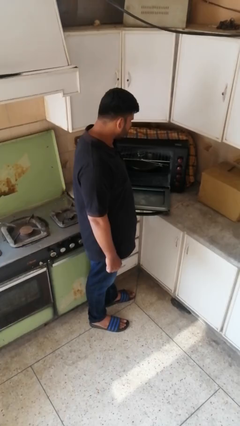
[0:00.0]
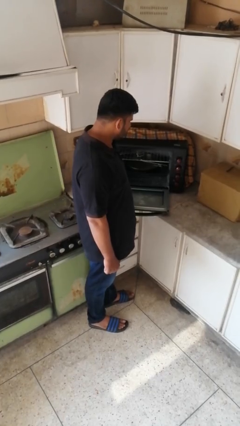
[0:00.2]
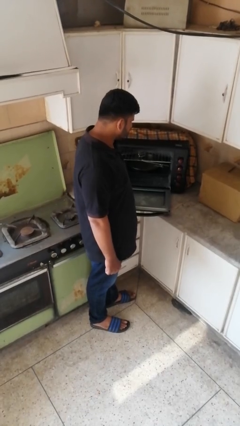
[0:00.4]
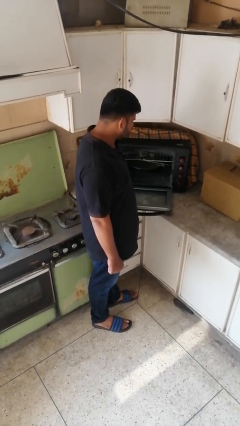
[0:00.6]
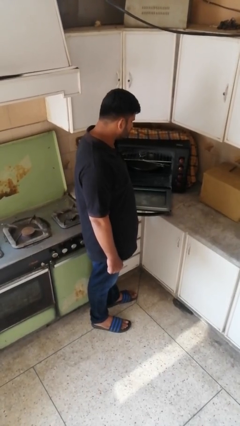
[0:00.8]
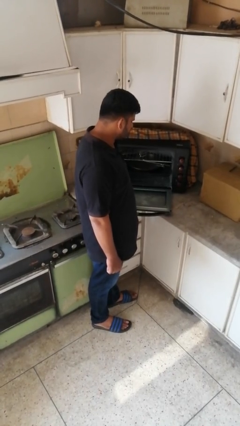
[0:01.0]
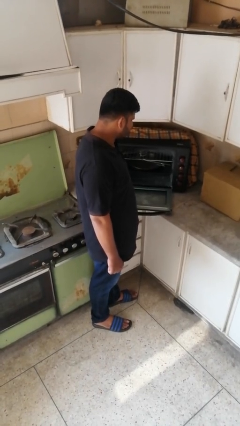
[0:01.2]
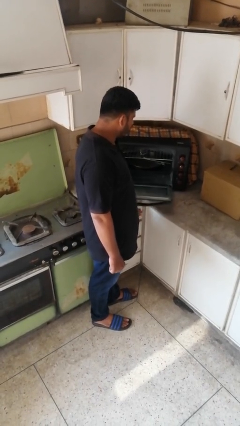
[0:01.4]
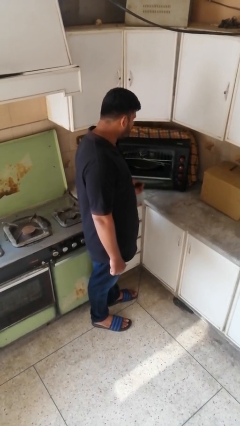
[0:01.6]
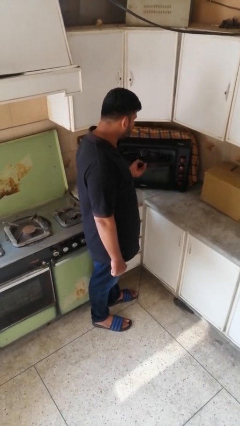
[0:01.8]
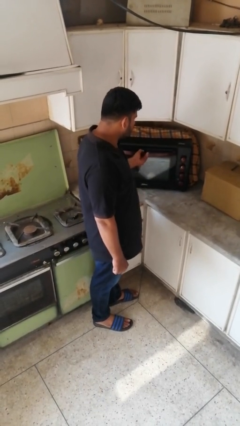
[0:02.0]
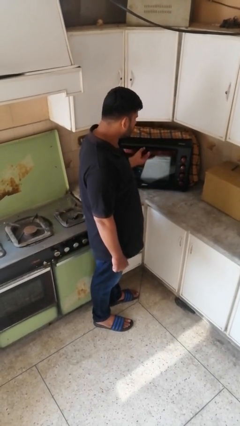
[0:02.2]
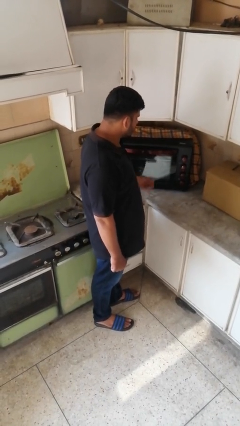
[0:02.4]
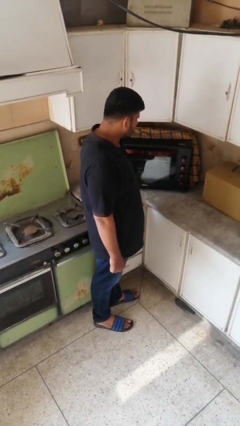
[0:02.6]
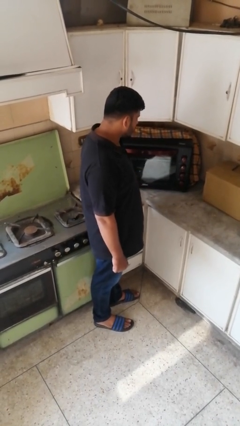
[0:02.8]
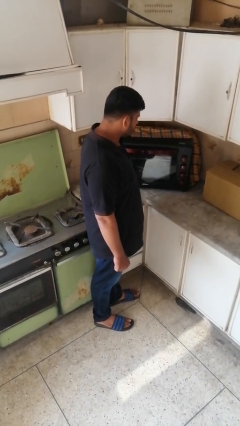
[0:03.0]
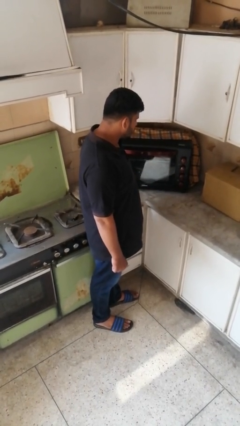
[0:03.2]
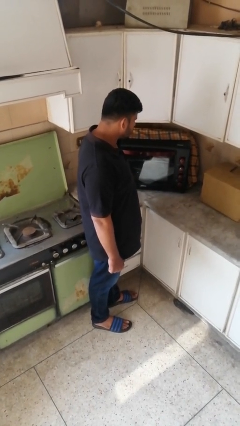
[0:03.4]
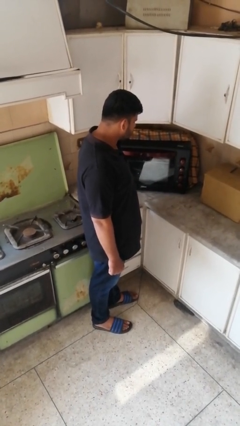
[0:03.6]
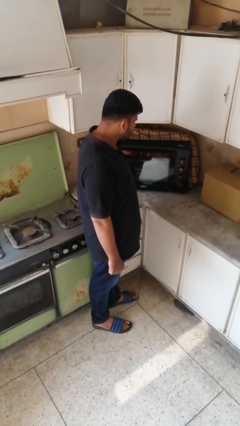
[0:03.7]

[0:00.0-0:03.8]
person closes oven door

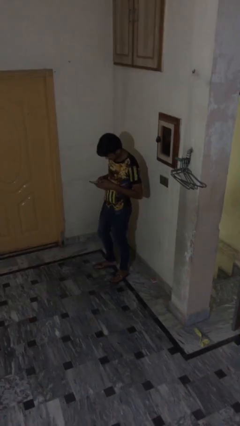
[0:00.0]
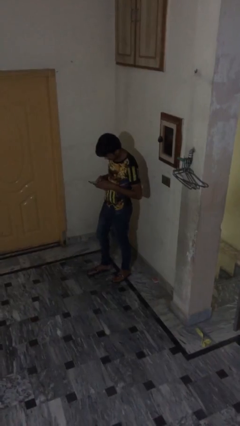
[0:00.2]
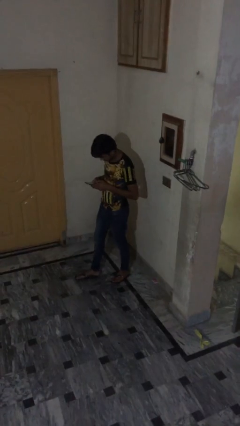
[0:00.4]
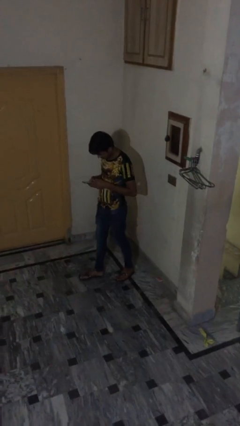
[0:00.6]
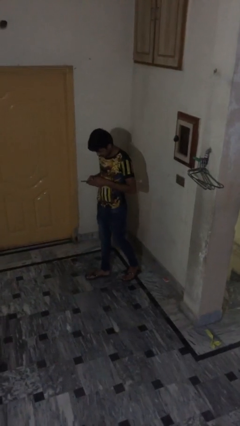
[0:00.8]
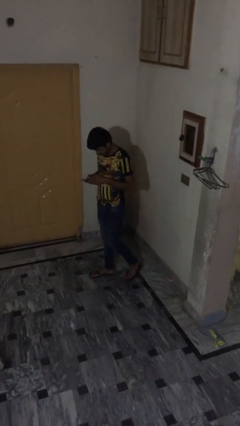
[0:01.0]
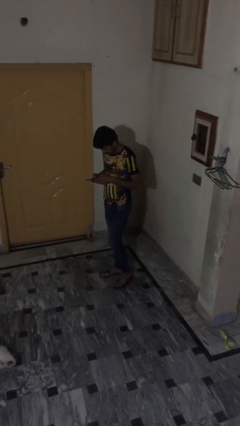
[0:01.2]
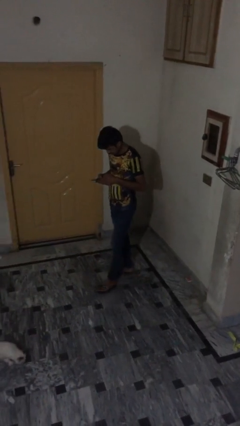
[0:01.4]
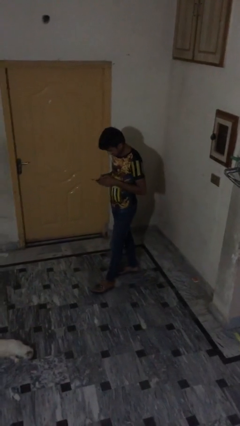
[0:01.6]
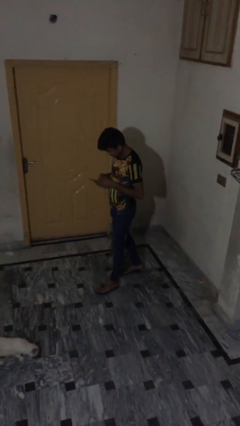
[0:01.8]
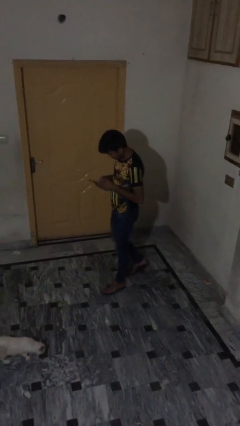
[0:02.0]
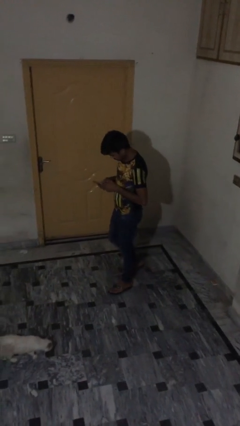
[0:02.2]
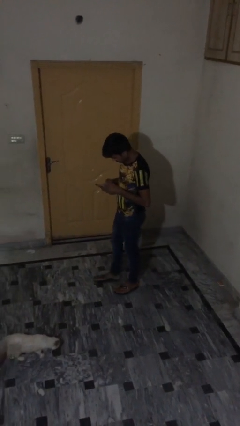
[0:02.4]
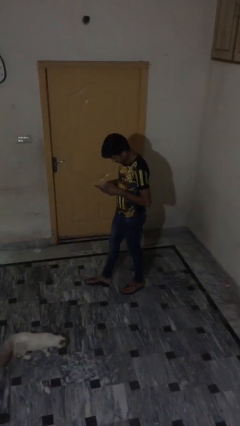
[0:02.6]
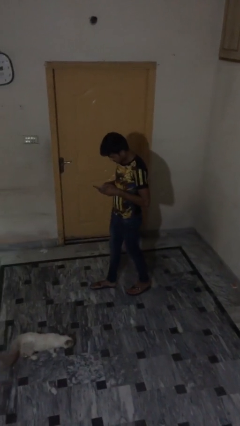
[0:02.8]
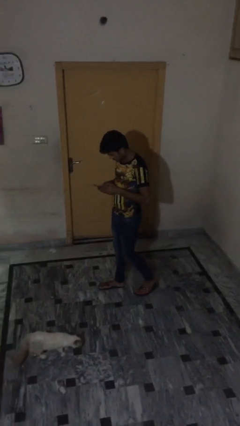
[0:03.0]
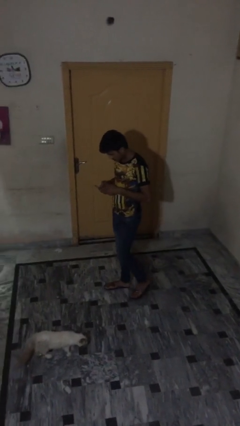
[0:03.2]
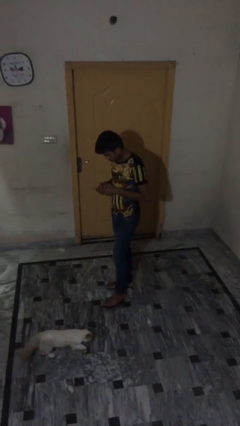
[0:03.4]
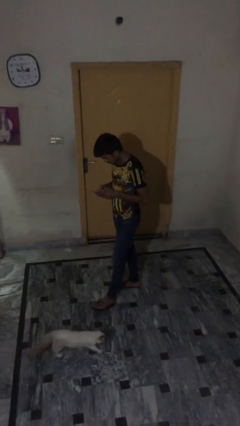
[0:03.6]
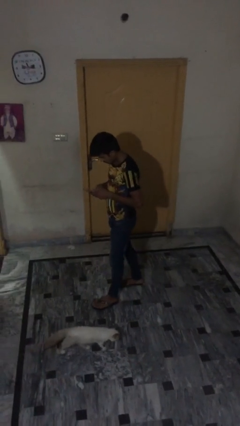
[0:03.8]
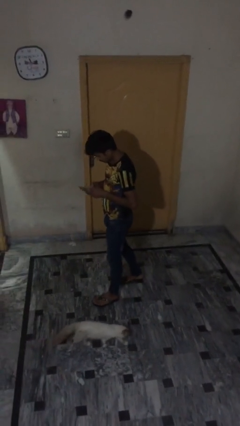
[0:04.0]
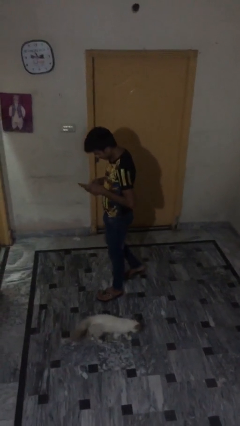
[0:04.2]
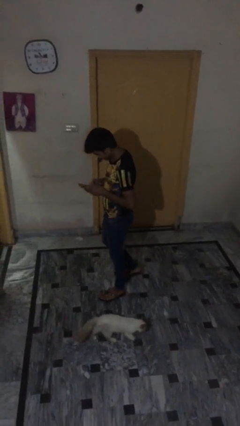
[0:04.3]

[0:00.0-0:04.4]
person texts on phone

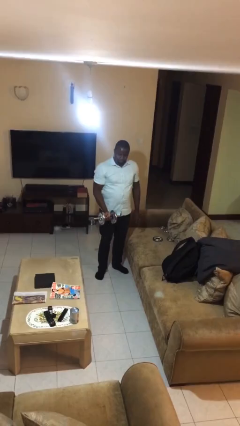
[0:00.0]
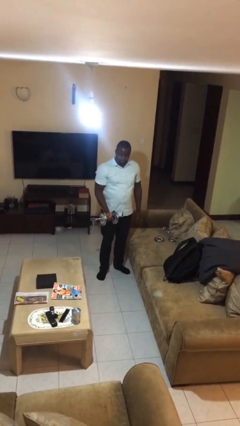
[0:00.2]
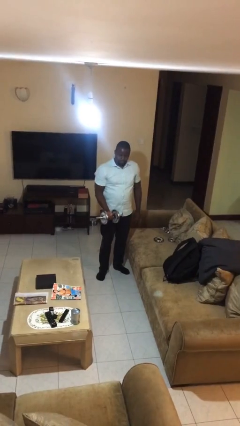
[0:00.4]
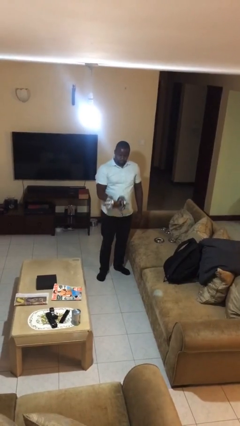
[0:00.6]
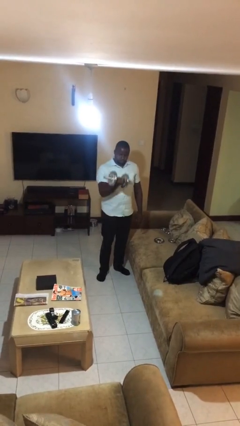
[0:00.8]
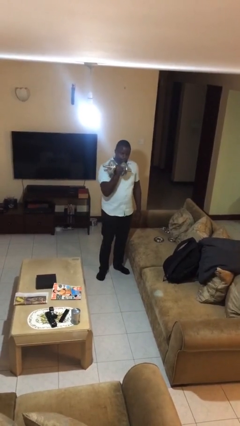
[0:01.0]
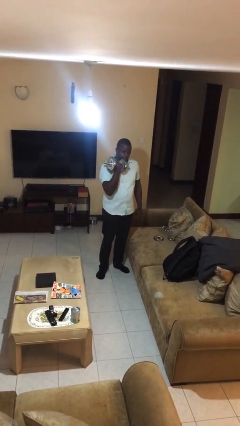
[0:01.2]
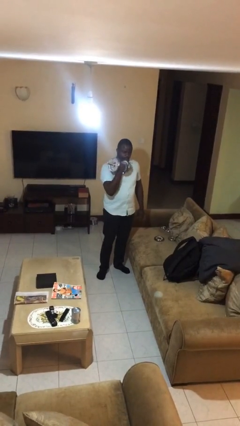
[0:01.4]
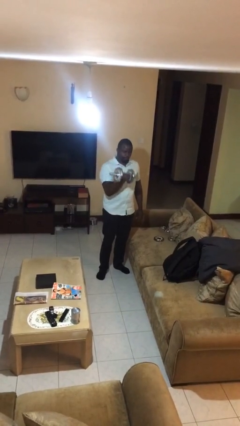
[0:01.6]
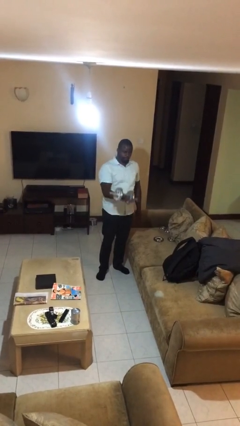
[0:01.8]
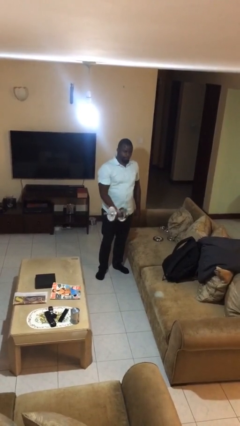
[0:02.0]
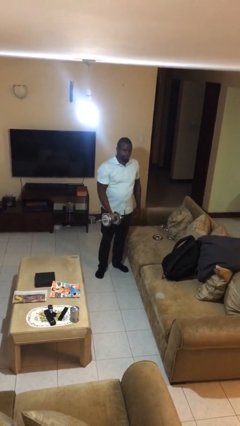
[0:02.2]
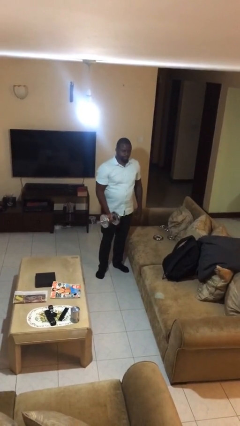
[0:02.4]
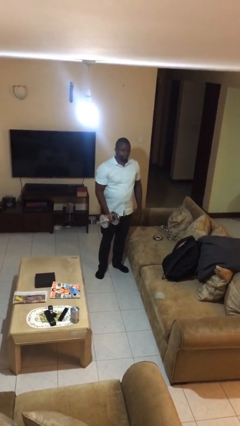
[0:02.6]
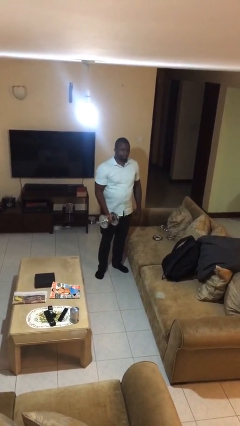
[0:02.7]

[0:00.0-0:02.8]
person lifts dumbbells

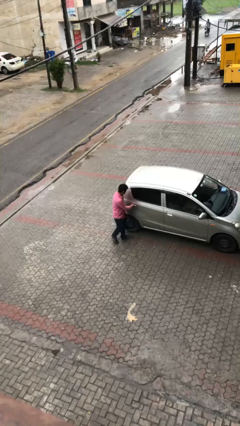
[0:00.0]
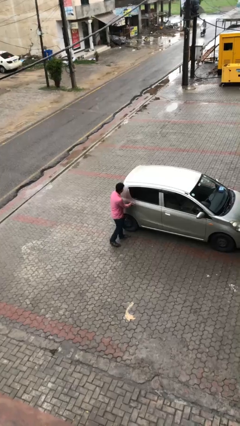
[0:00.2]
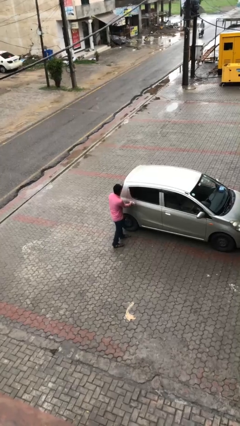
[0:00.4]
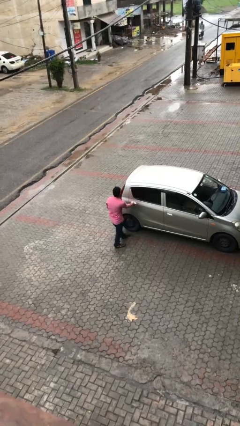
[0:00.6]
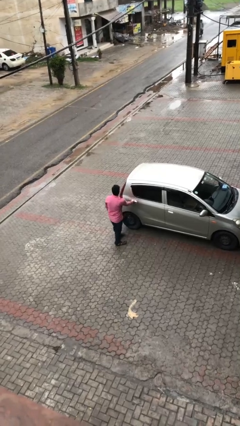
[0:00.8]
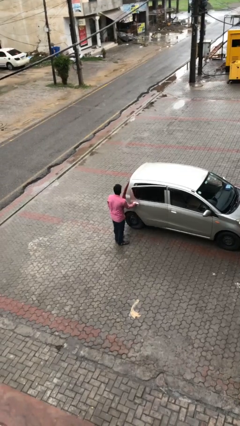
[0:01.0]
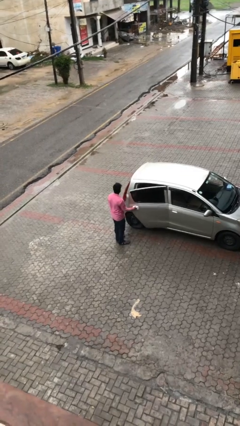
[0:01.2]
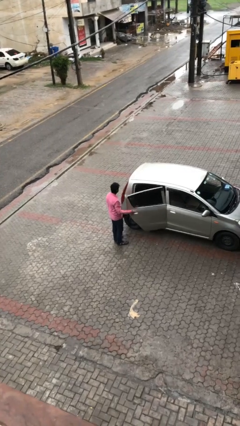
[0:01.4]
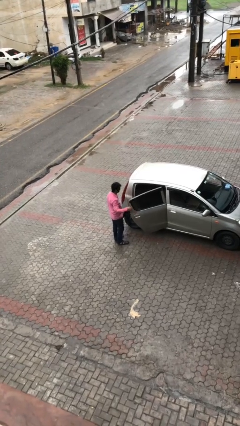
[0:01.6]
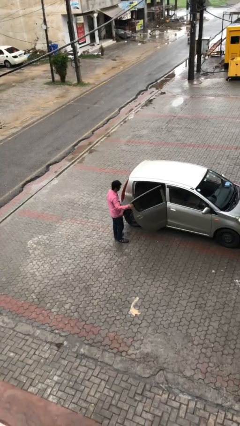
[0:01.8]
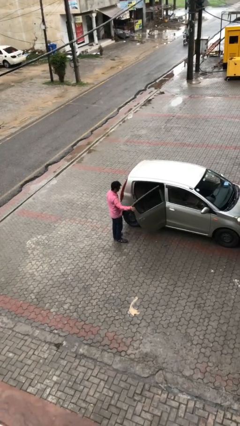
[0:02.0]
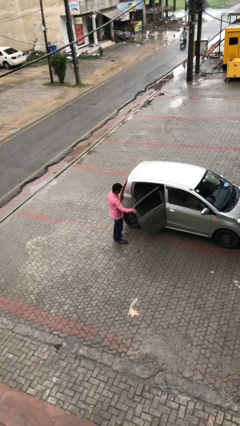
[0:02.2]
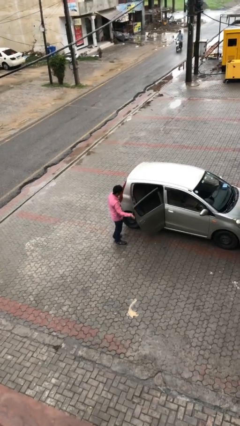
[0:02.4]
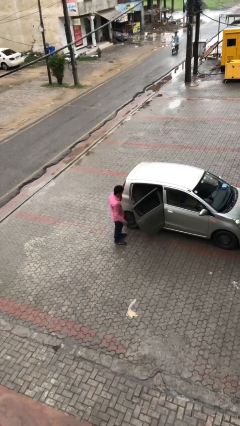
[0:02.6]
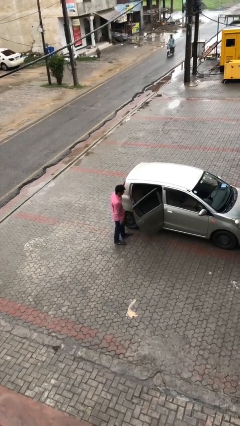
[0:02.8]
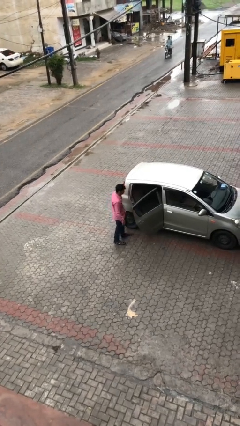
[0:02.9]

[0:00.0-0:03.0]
person opens car door

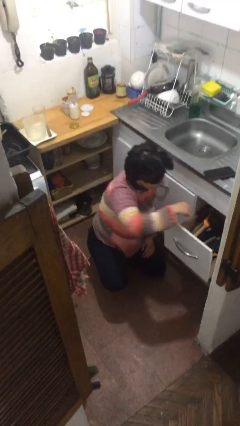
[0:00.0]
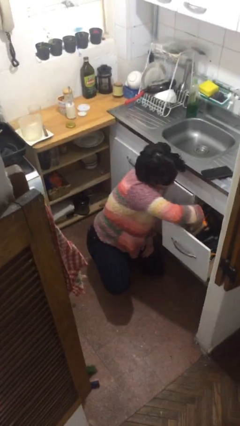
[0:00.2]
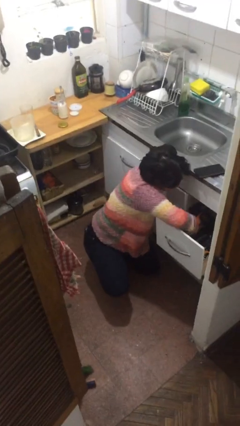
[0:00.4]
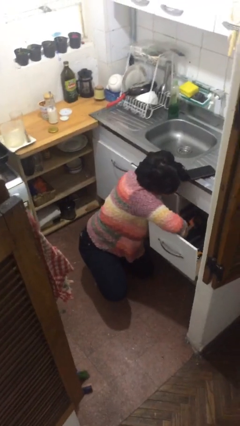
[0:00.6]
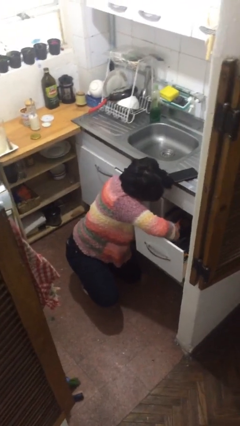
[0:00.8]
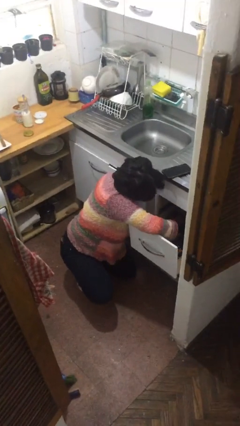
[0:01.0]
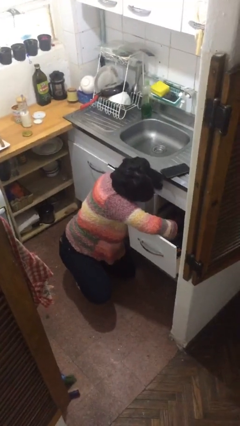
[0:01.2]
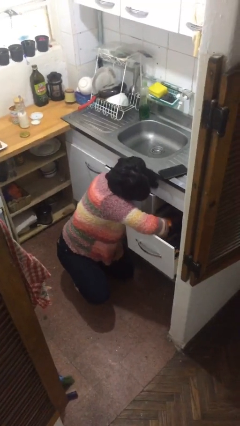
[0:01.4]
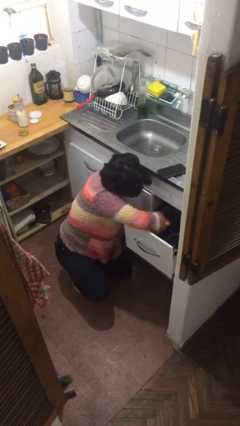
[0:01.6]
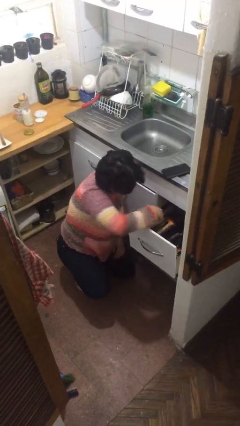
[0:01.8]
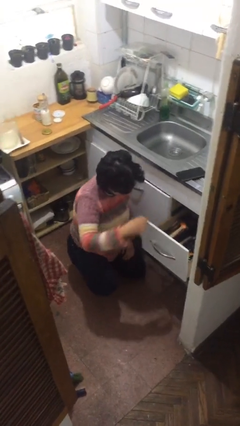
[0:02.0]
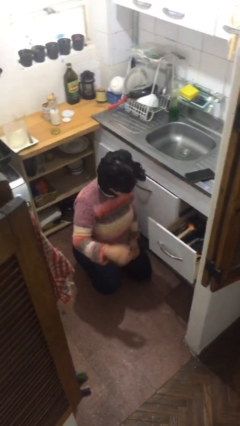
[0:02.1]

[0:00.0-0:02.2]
person searches in kitchen drawer

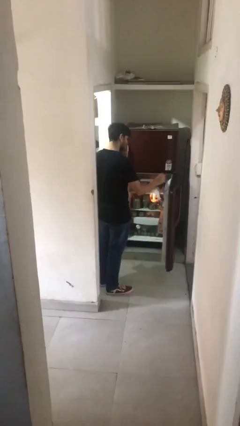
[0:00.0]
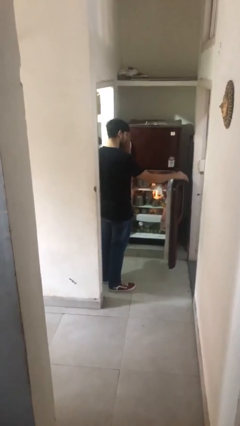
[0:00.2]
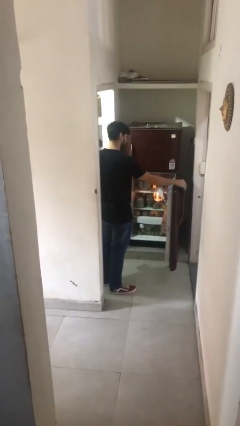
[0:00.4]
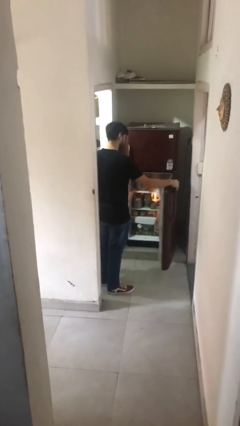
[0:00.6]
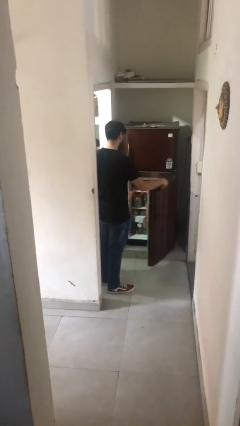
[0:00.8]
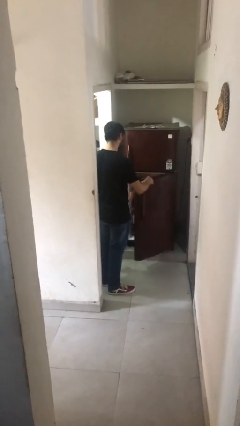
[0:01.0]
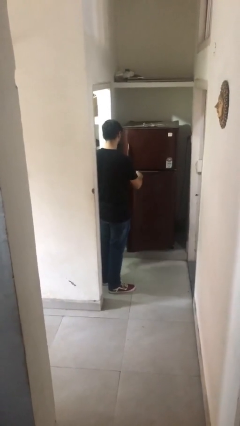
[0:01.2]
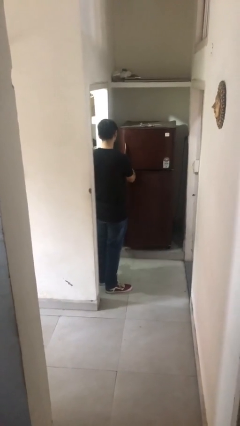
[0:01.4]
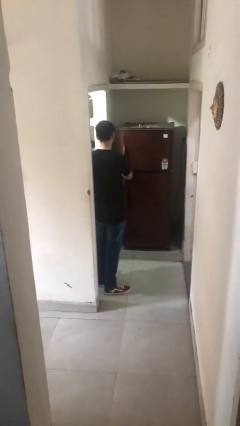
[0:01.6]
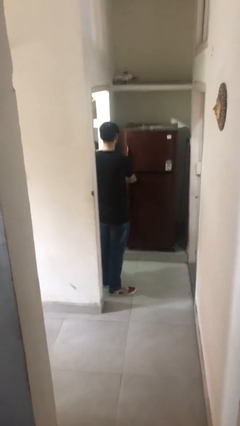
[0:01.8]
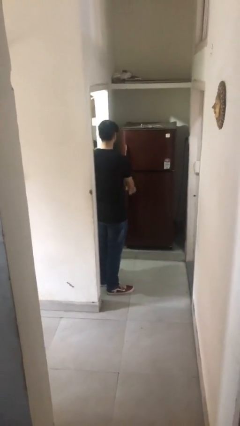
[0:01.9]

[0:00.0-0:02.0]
person closes refrigerator
